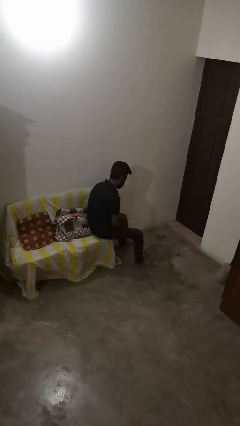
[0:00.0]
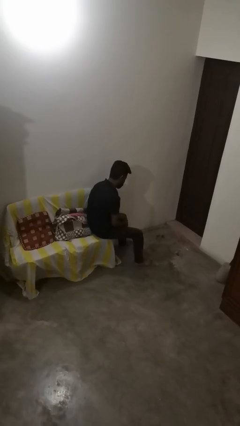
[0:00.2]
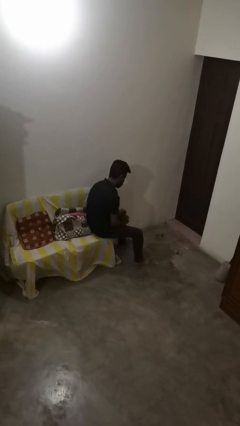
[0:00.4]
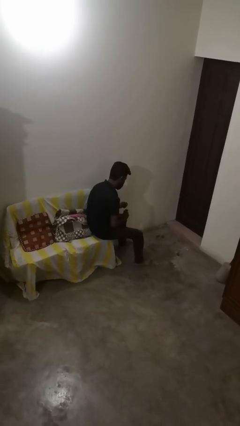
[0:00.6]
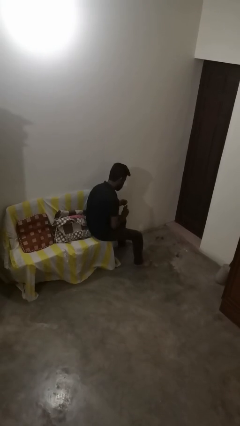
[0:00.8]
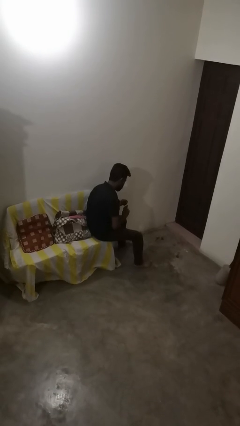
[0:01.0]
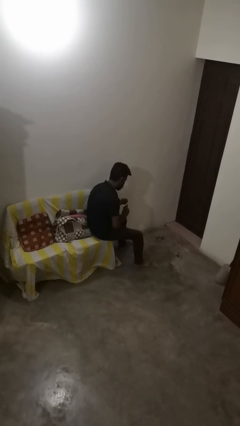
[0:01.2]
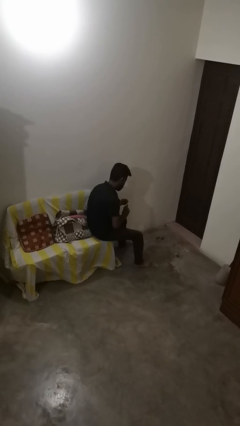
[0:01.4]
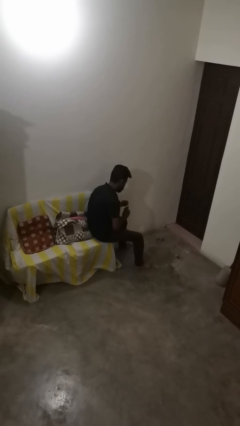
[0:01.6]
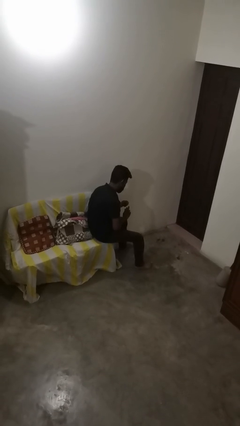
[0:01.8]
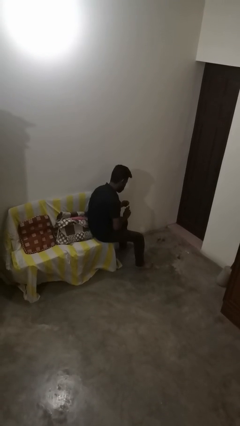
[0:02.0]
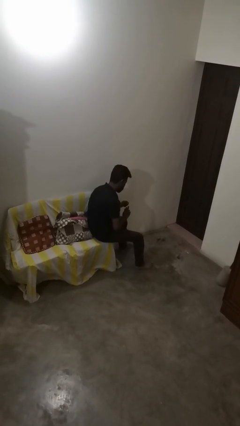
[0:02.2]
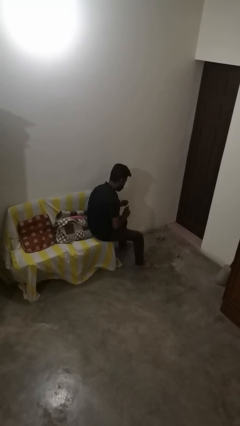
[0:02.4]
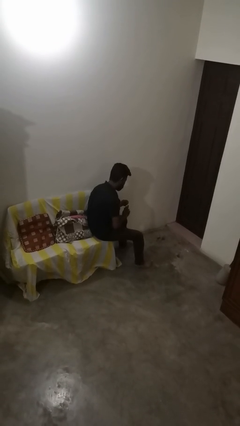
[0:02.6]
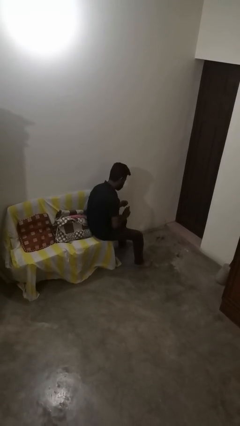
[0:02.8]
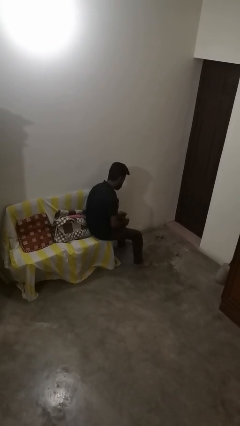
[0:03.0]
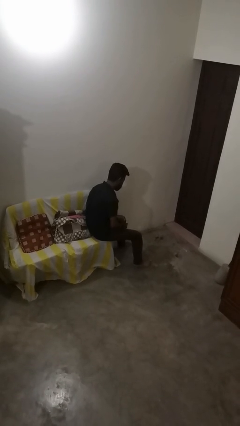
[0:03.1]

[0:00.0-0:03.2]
person paints fingernails

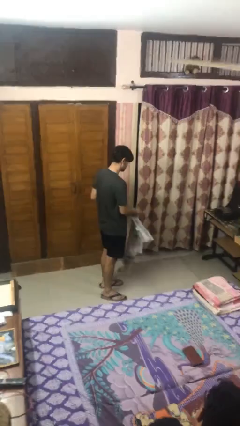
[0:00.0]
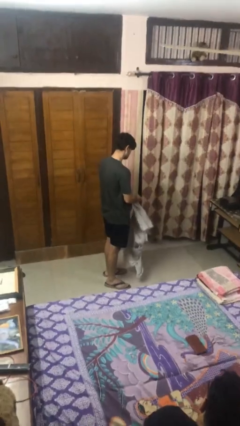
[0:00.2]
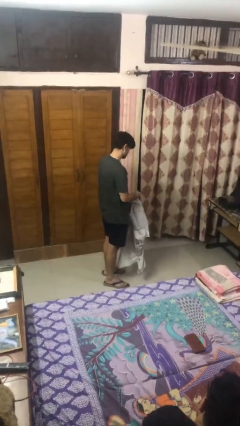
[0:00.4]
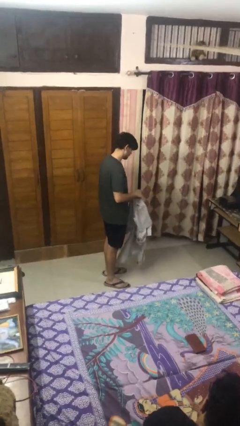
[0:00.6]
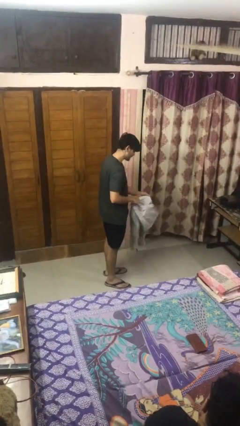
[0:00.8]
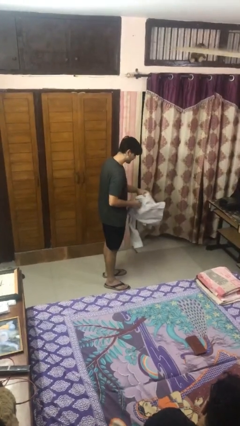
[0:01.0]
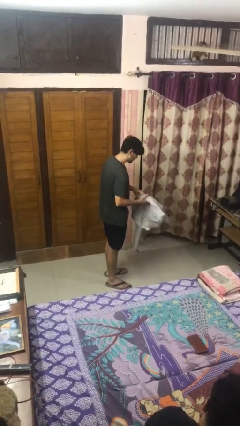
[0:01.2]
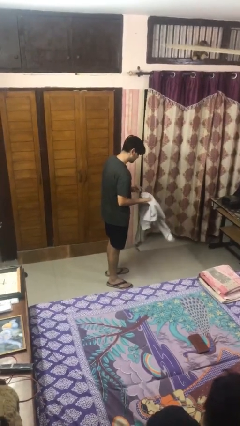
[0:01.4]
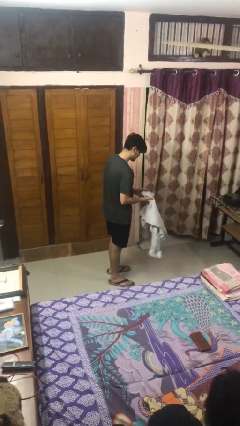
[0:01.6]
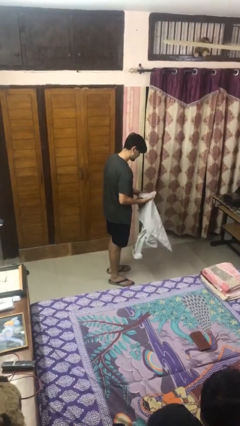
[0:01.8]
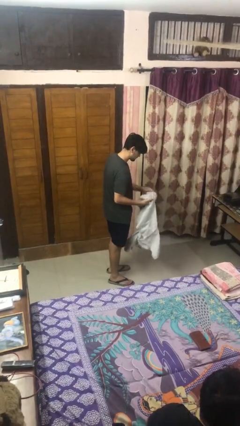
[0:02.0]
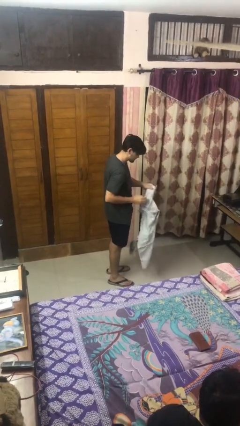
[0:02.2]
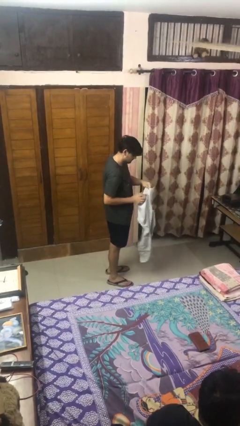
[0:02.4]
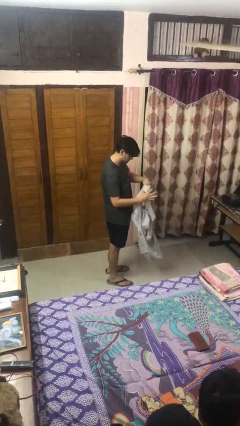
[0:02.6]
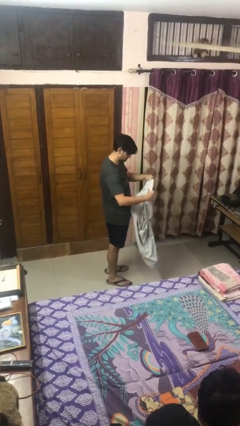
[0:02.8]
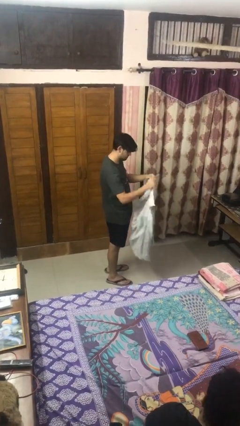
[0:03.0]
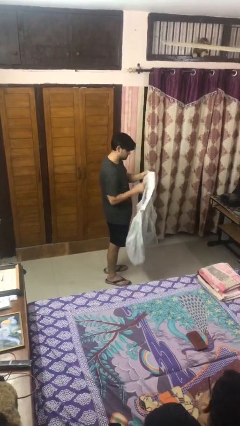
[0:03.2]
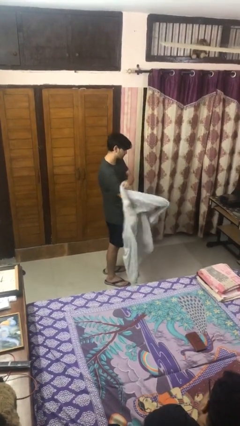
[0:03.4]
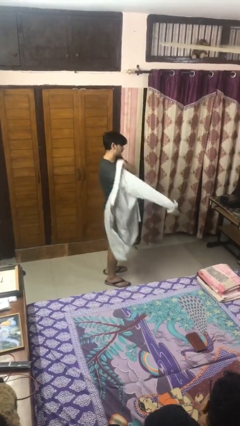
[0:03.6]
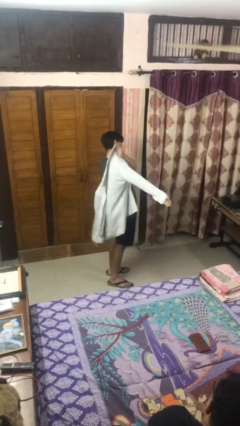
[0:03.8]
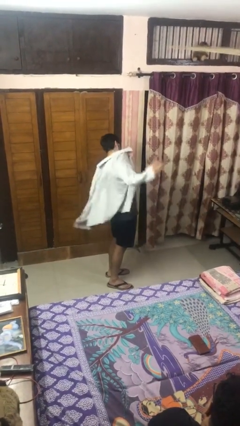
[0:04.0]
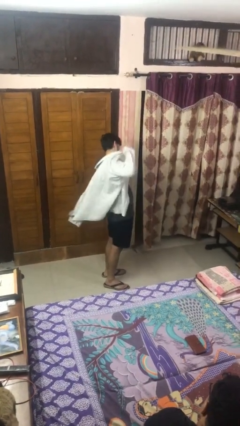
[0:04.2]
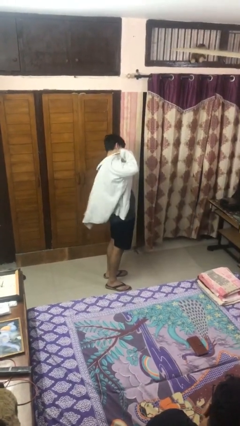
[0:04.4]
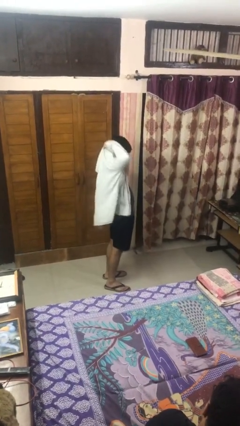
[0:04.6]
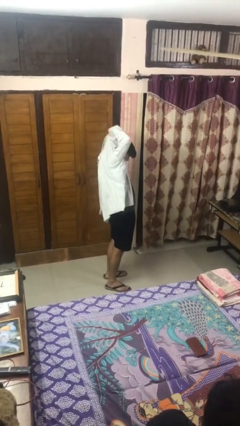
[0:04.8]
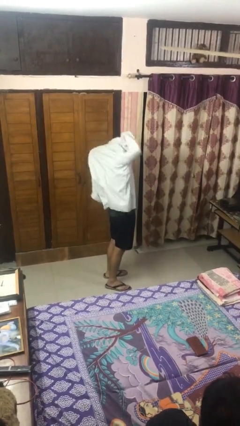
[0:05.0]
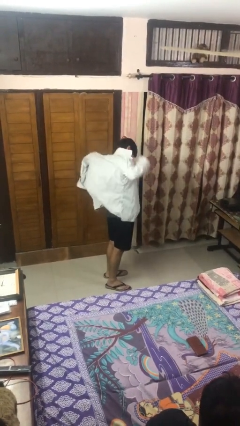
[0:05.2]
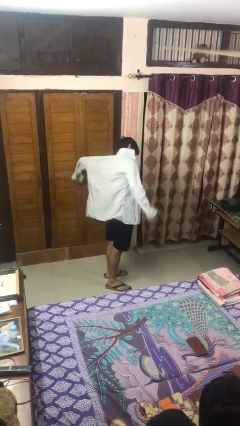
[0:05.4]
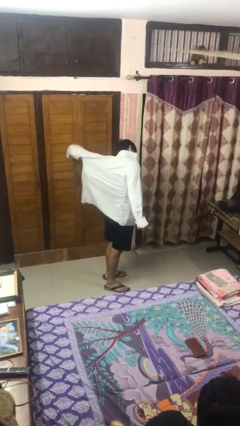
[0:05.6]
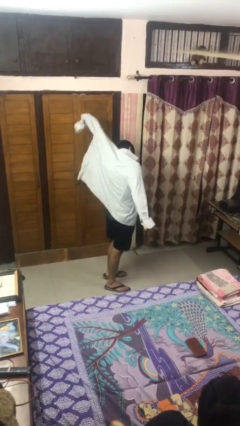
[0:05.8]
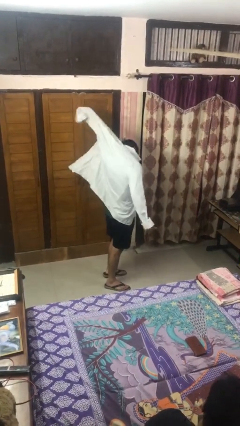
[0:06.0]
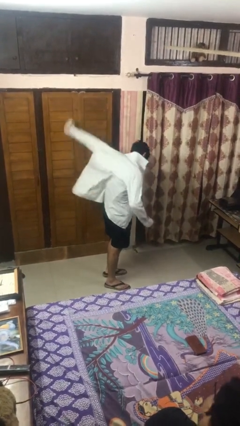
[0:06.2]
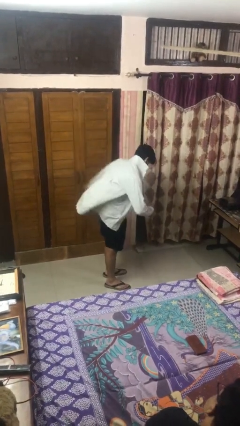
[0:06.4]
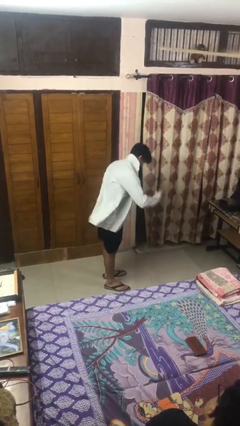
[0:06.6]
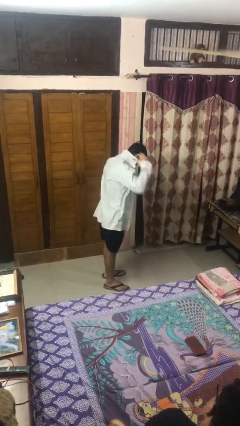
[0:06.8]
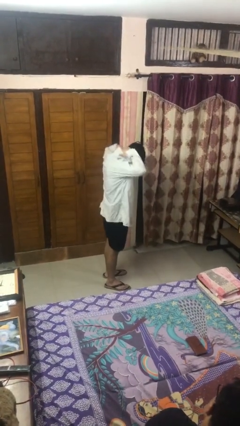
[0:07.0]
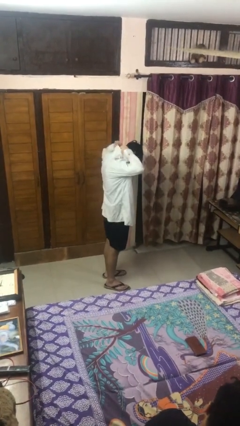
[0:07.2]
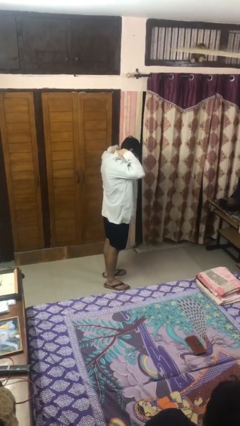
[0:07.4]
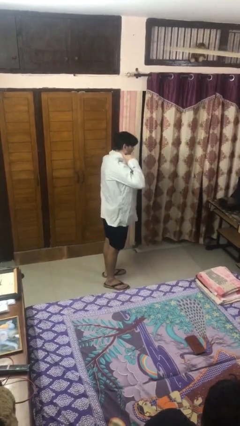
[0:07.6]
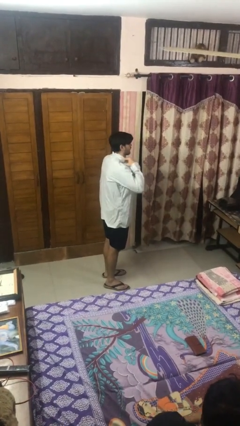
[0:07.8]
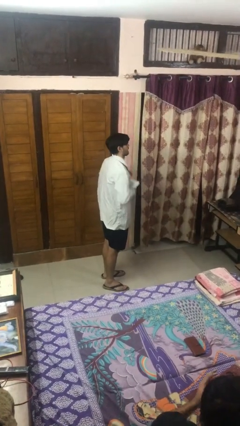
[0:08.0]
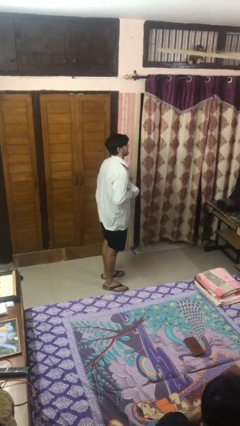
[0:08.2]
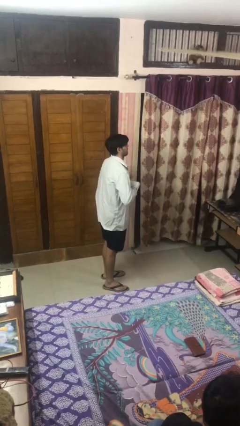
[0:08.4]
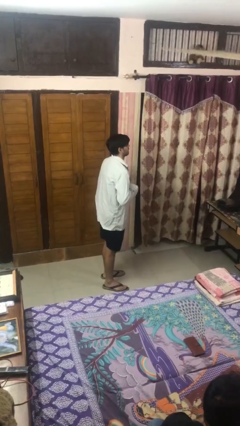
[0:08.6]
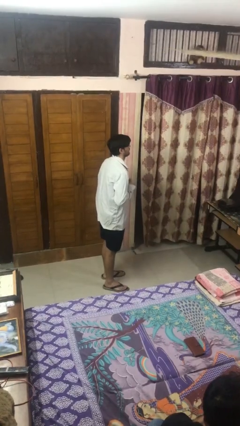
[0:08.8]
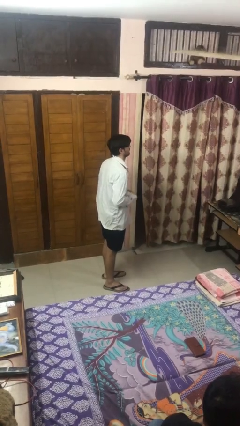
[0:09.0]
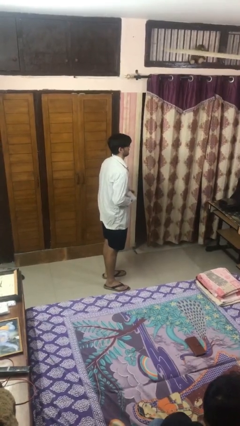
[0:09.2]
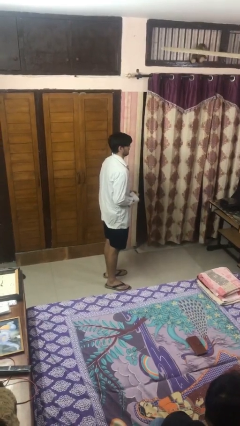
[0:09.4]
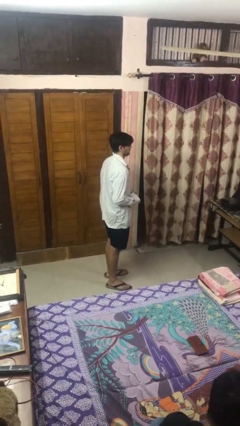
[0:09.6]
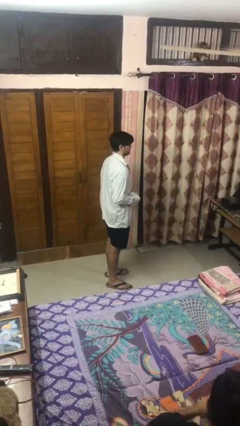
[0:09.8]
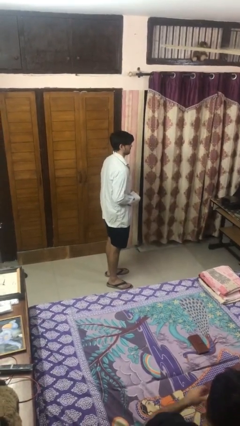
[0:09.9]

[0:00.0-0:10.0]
person puts on shirt

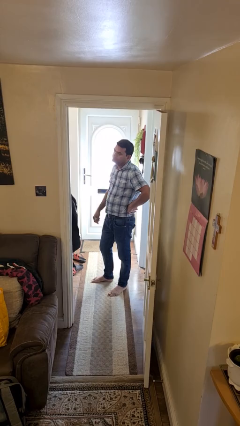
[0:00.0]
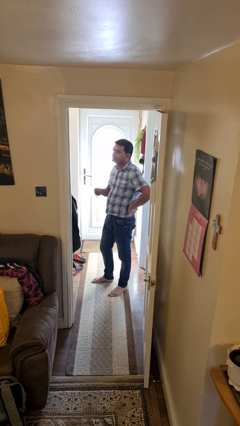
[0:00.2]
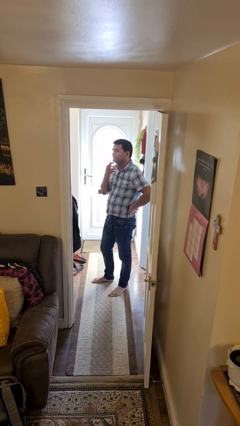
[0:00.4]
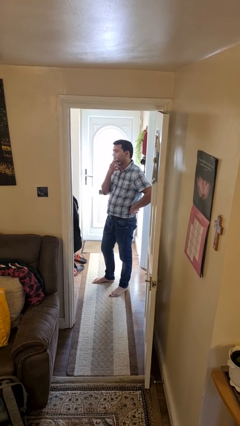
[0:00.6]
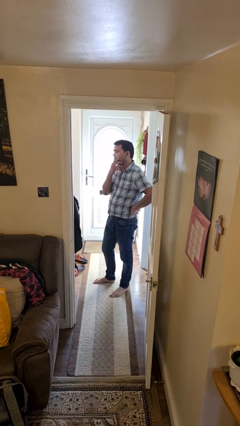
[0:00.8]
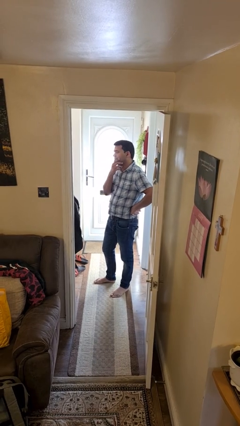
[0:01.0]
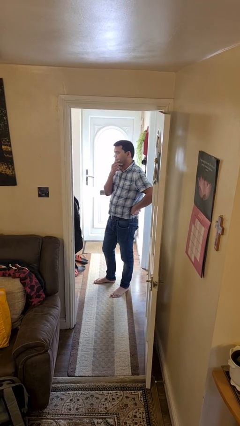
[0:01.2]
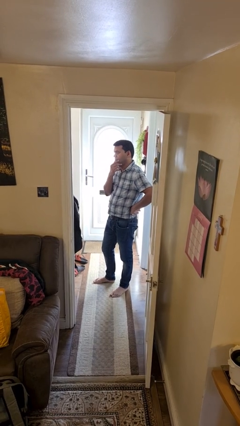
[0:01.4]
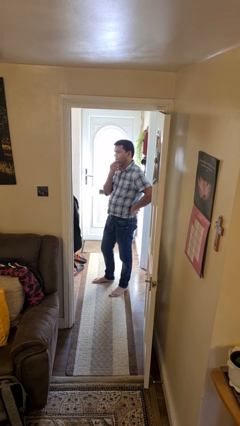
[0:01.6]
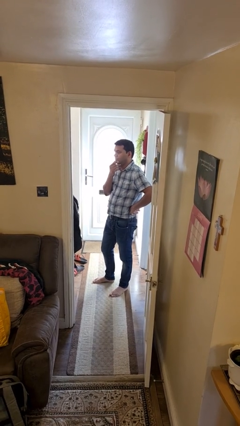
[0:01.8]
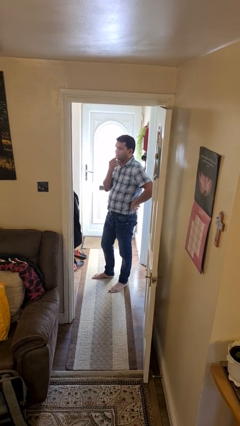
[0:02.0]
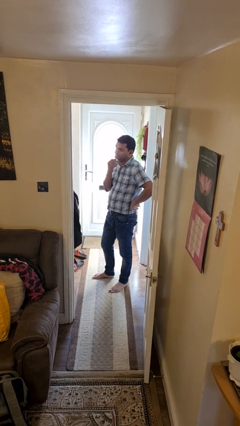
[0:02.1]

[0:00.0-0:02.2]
person strokes chin

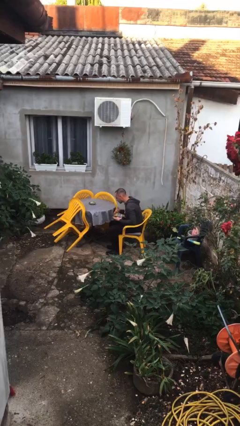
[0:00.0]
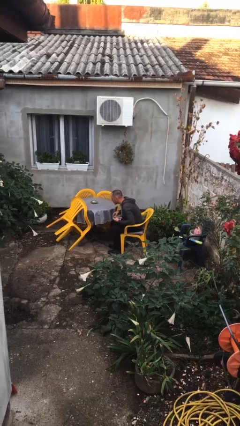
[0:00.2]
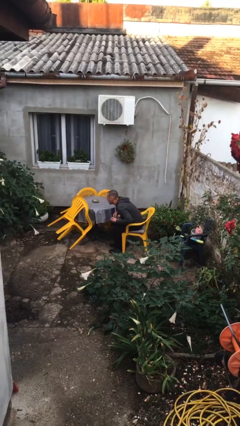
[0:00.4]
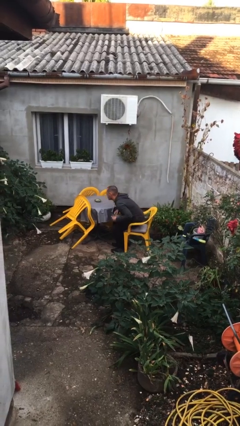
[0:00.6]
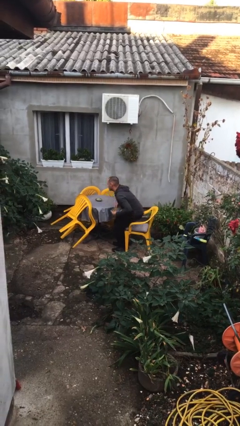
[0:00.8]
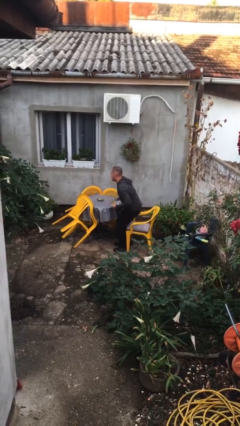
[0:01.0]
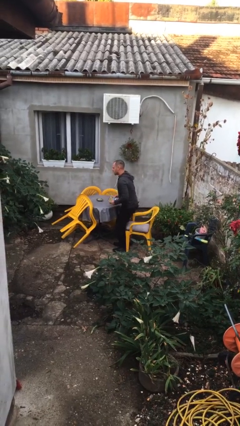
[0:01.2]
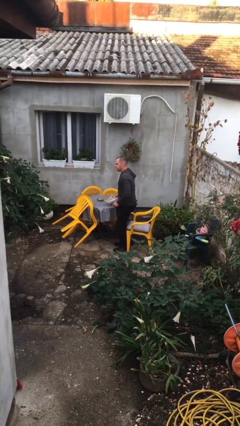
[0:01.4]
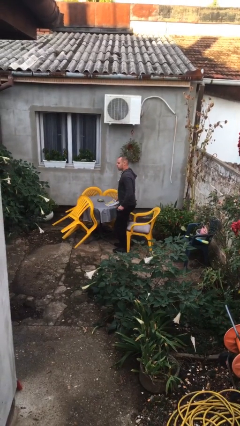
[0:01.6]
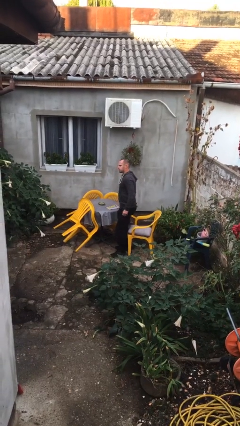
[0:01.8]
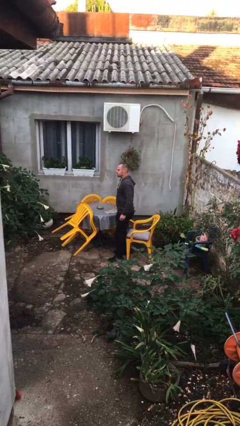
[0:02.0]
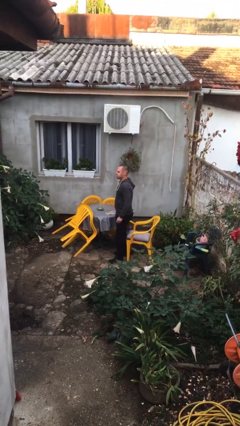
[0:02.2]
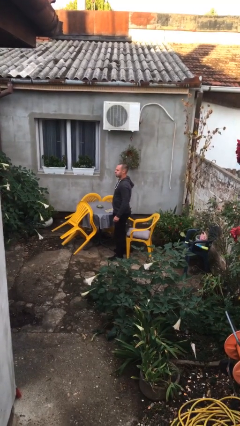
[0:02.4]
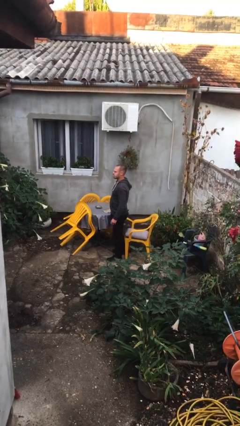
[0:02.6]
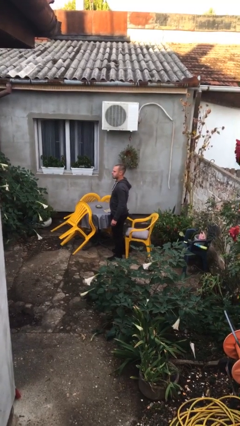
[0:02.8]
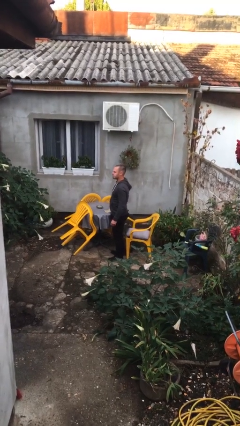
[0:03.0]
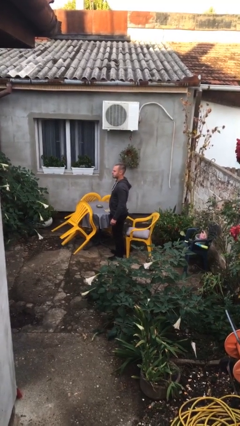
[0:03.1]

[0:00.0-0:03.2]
person stands up
